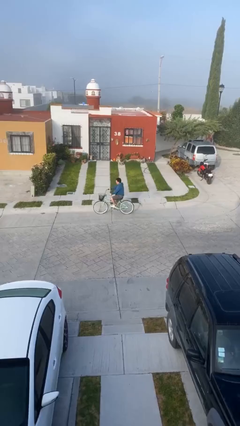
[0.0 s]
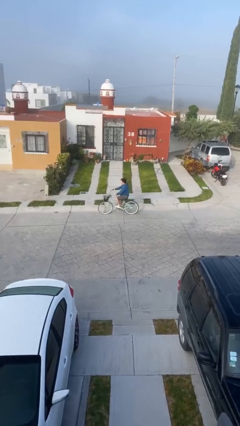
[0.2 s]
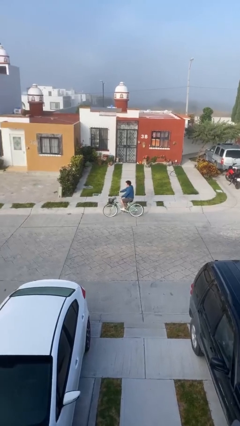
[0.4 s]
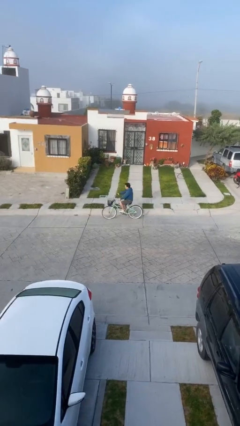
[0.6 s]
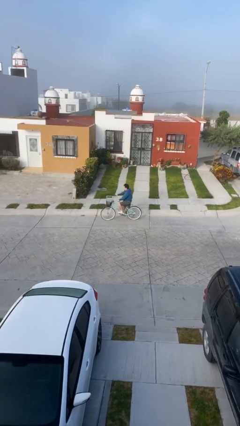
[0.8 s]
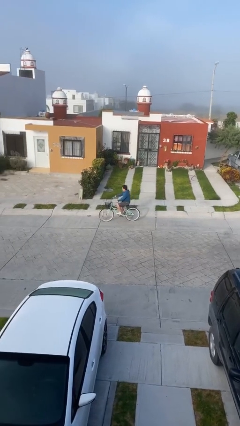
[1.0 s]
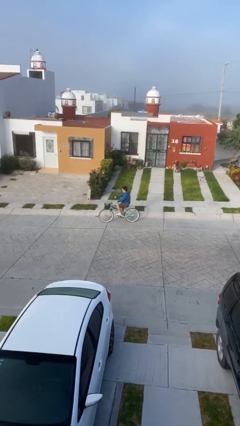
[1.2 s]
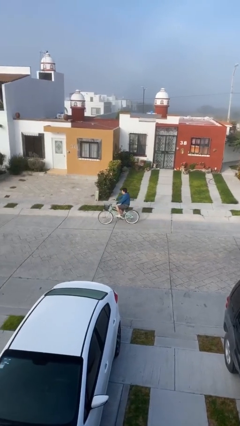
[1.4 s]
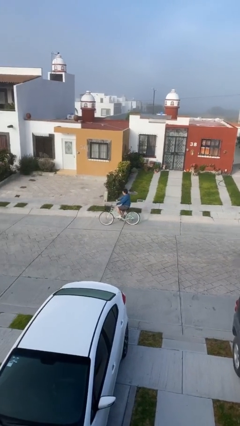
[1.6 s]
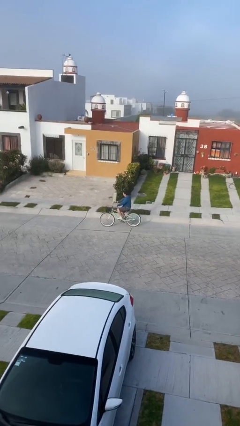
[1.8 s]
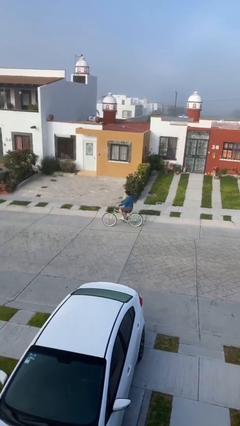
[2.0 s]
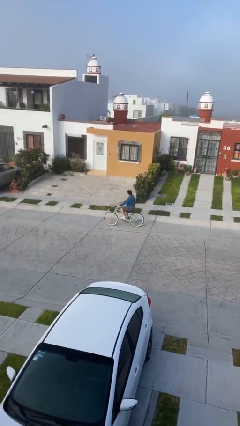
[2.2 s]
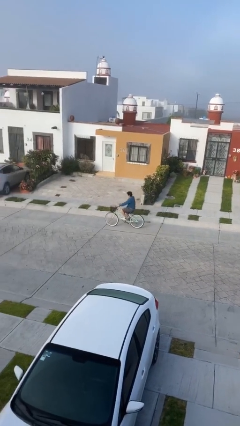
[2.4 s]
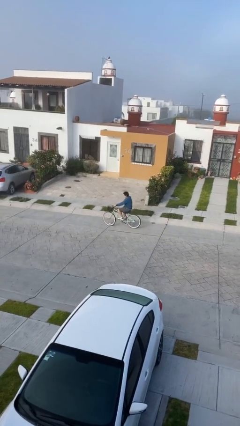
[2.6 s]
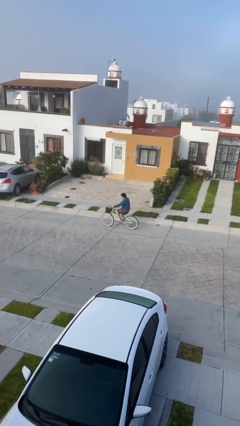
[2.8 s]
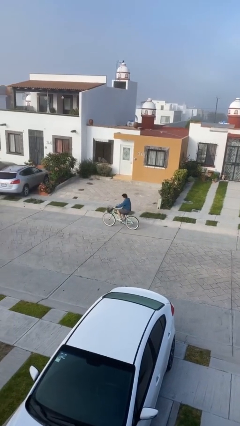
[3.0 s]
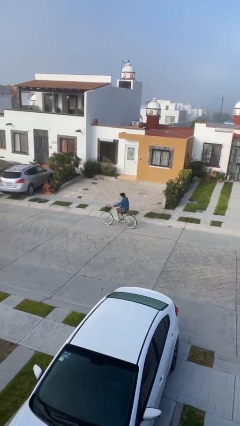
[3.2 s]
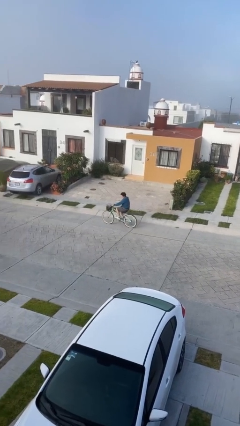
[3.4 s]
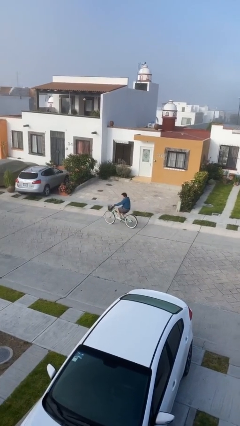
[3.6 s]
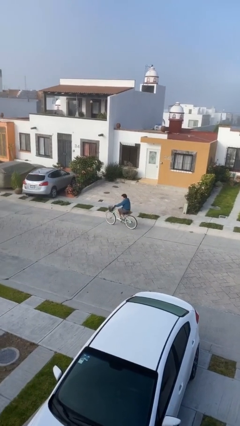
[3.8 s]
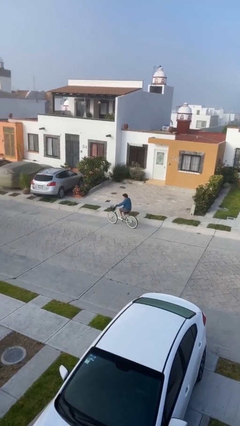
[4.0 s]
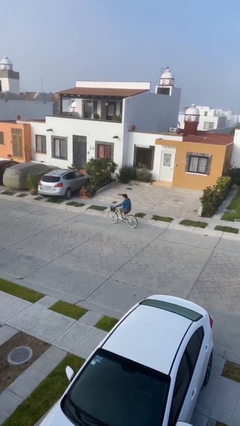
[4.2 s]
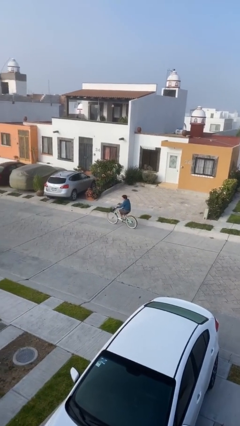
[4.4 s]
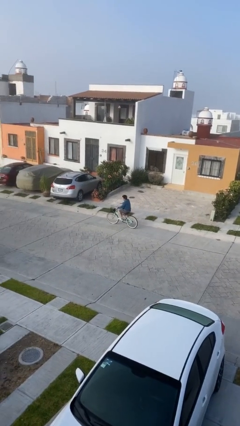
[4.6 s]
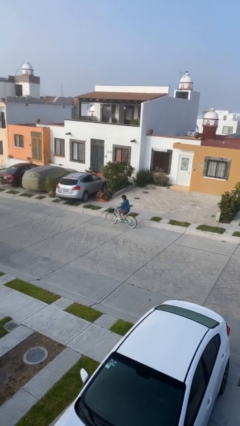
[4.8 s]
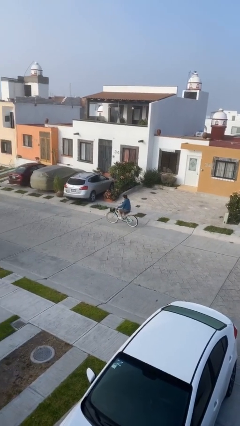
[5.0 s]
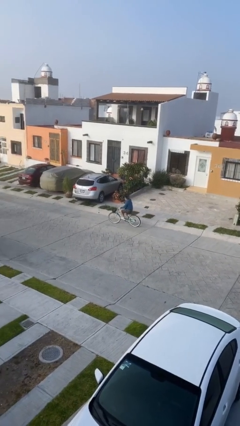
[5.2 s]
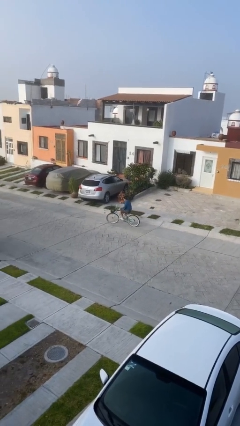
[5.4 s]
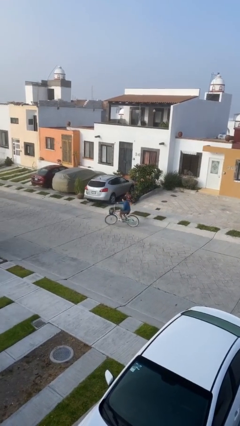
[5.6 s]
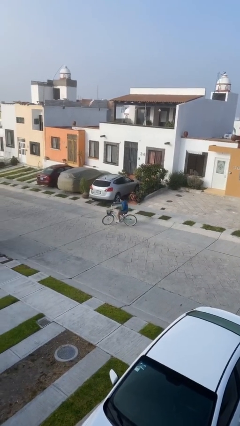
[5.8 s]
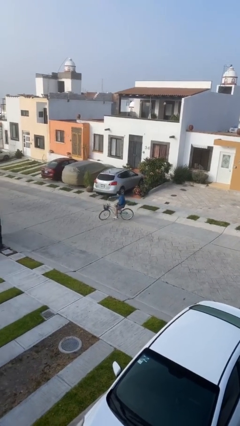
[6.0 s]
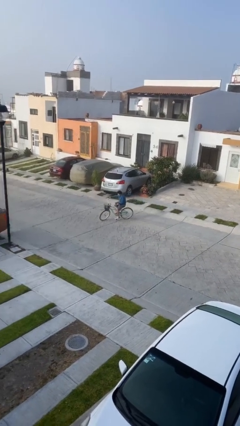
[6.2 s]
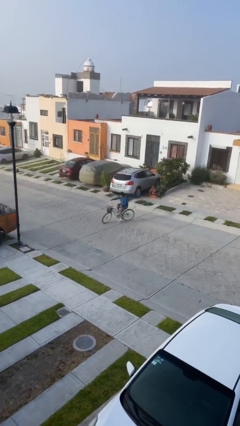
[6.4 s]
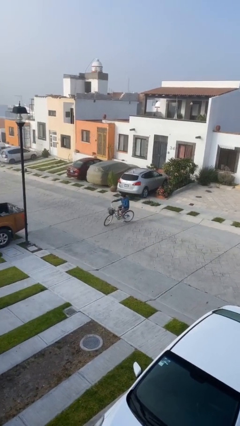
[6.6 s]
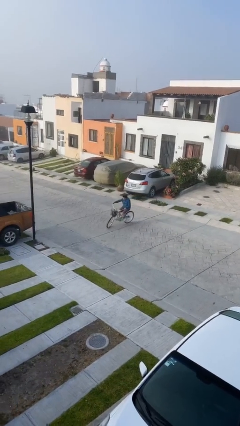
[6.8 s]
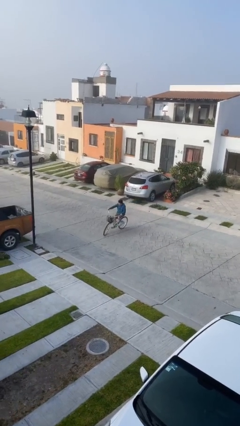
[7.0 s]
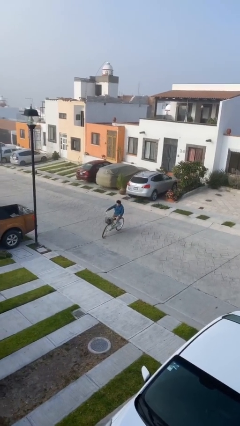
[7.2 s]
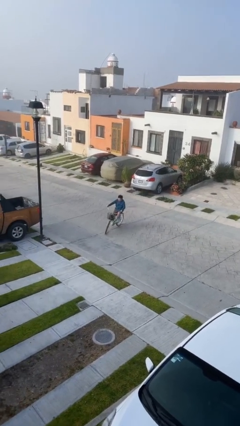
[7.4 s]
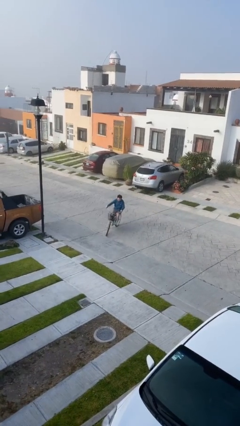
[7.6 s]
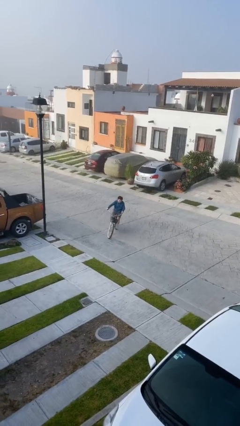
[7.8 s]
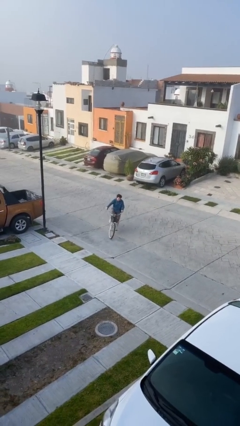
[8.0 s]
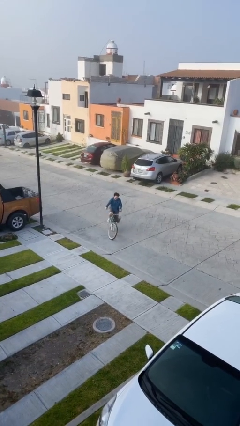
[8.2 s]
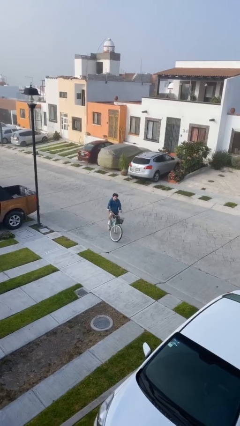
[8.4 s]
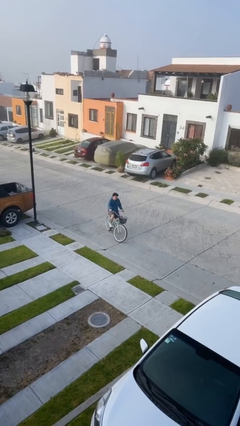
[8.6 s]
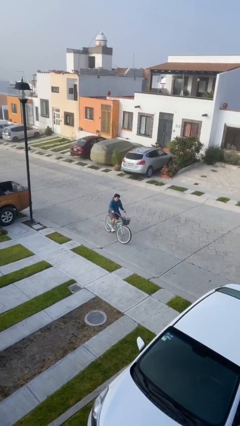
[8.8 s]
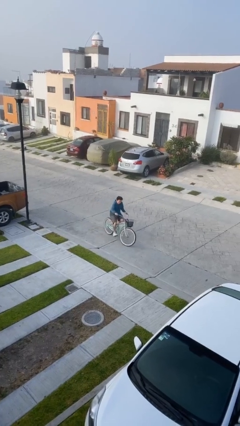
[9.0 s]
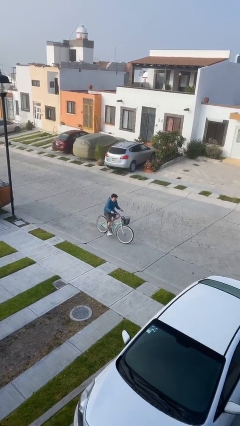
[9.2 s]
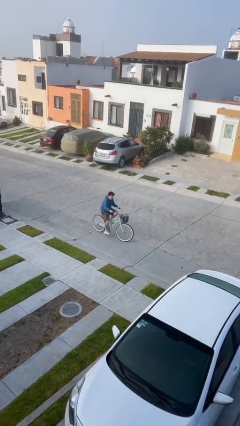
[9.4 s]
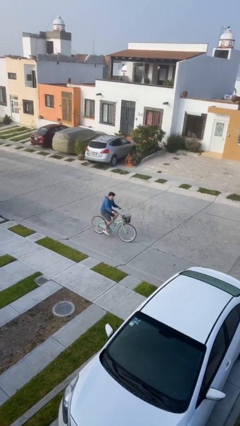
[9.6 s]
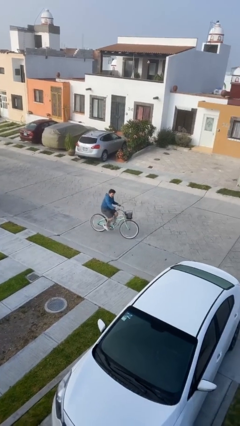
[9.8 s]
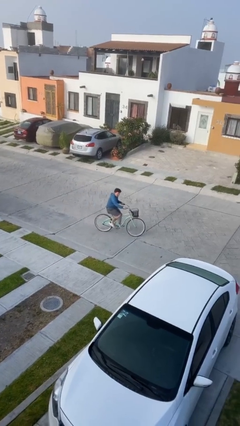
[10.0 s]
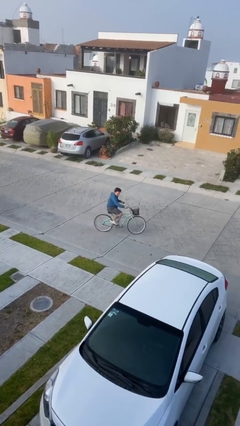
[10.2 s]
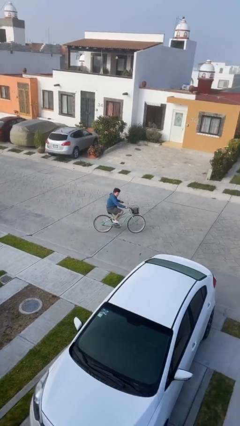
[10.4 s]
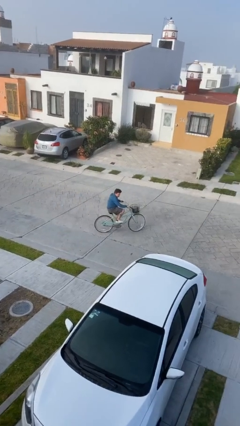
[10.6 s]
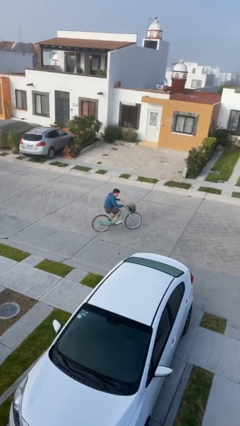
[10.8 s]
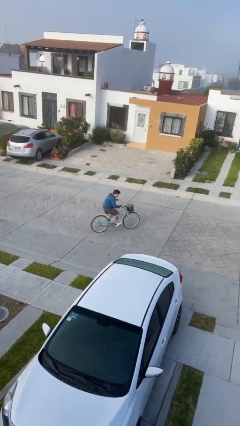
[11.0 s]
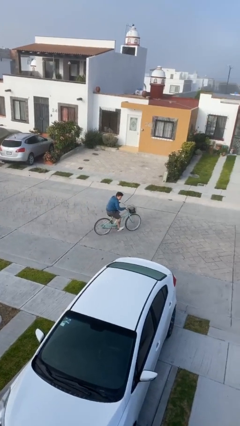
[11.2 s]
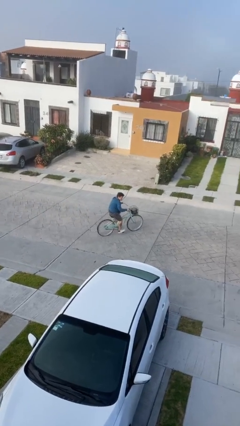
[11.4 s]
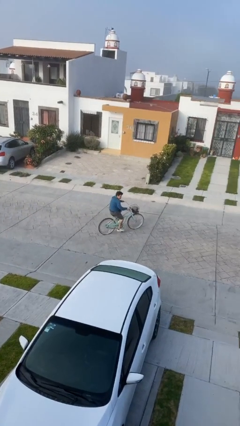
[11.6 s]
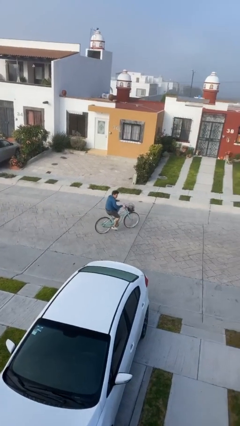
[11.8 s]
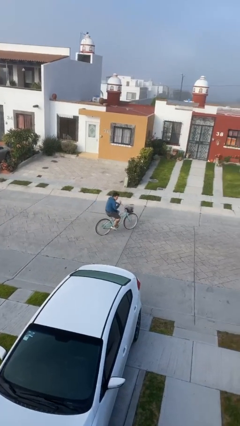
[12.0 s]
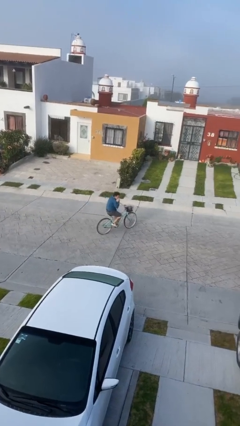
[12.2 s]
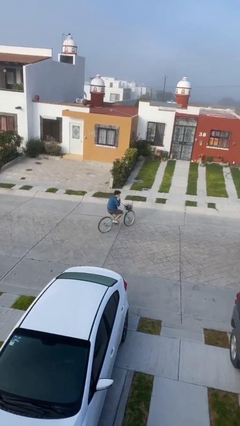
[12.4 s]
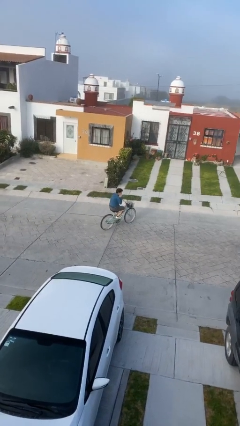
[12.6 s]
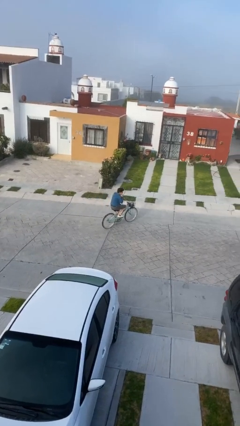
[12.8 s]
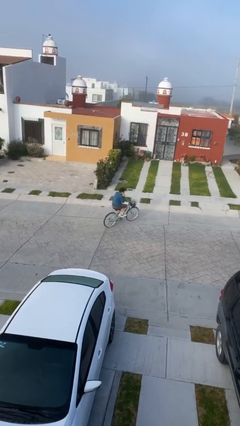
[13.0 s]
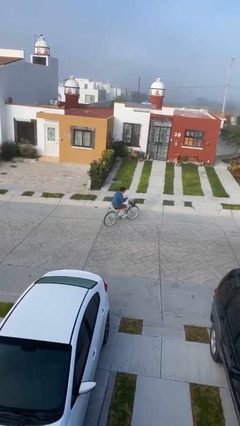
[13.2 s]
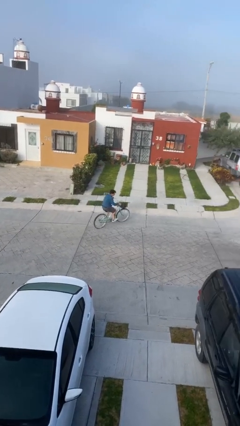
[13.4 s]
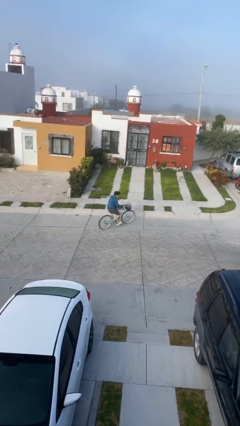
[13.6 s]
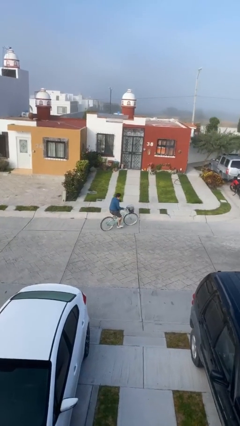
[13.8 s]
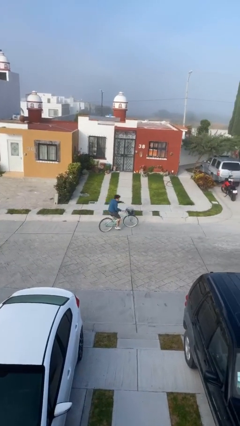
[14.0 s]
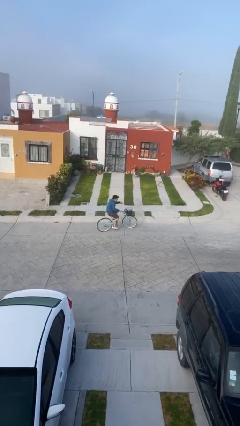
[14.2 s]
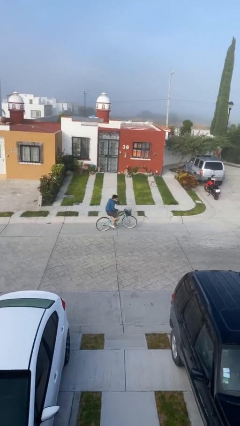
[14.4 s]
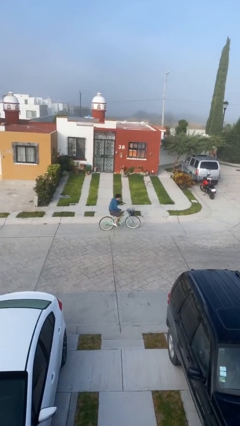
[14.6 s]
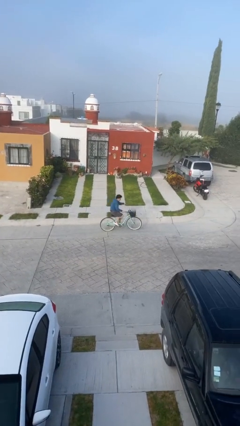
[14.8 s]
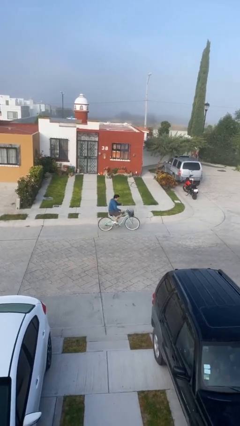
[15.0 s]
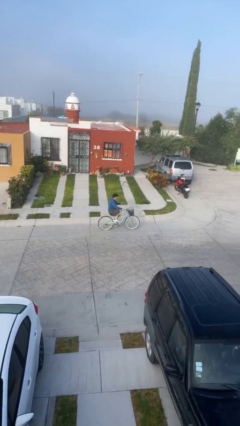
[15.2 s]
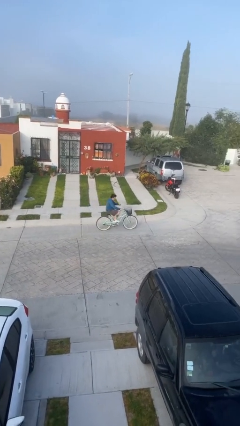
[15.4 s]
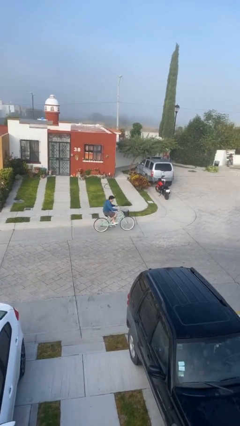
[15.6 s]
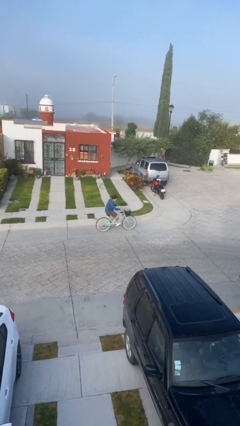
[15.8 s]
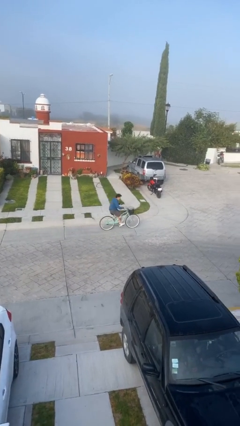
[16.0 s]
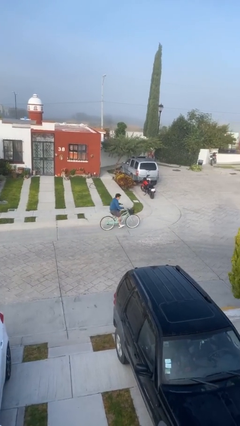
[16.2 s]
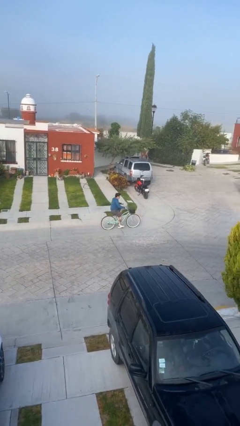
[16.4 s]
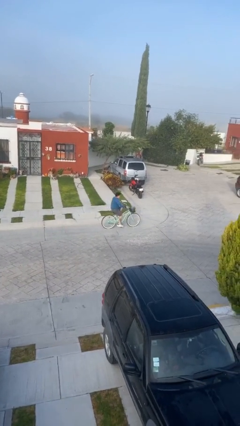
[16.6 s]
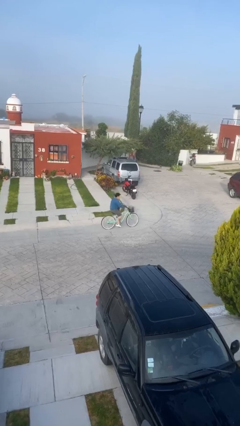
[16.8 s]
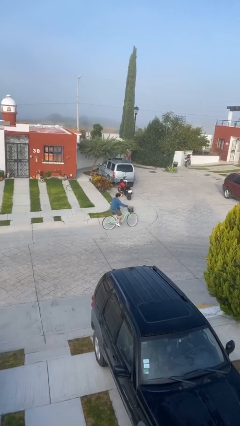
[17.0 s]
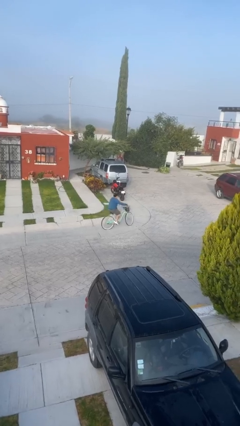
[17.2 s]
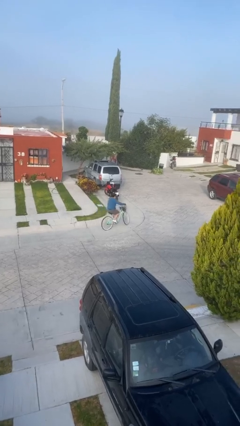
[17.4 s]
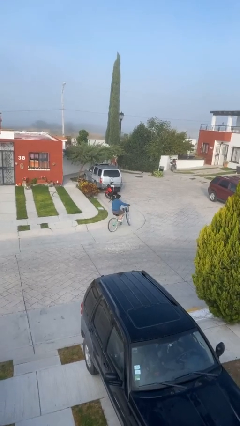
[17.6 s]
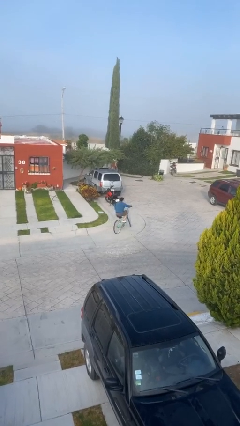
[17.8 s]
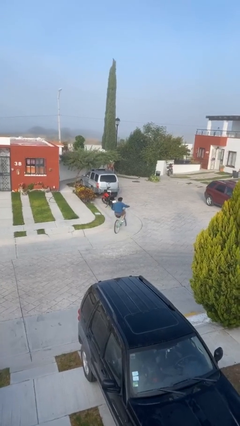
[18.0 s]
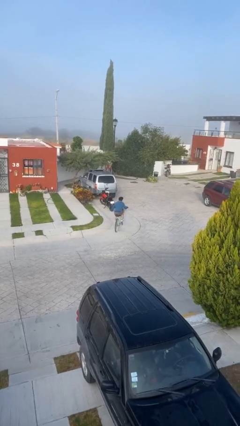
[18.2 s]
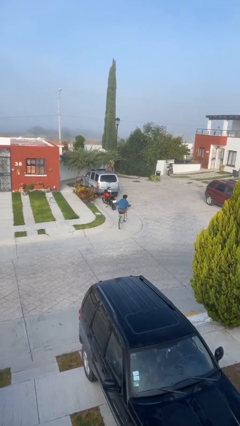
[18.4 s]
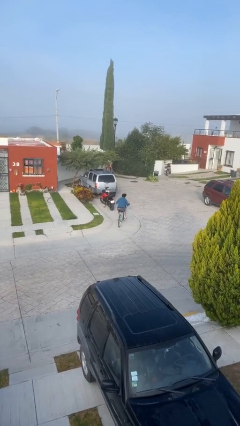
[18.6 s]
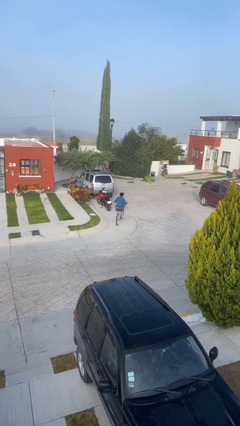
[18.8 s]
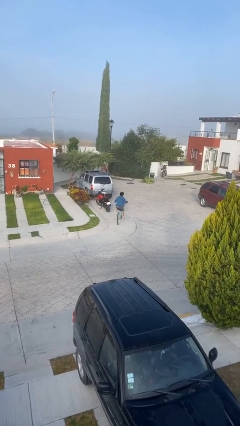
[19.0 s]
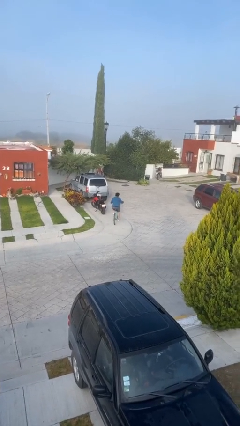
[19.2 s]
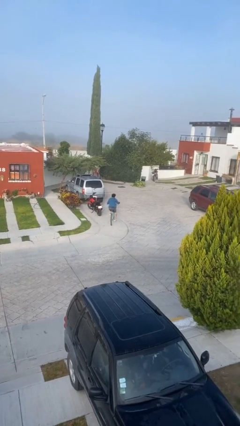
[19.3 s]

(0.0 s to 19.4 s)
person rides bicycle
